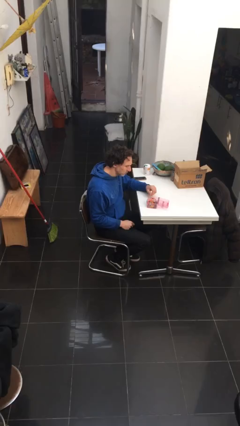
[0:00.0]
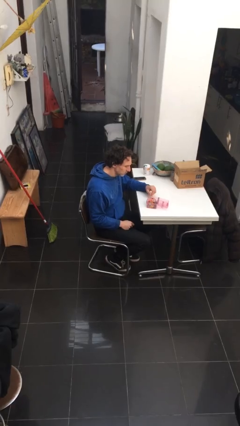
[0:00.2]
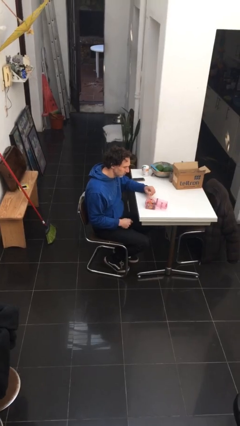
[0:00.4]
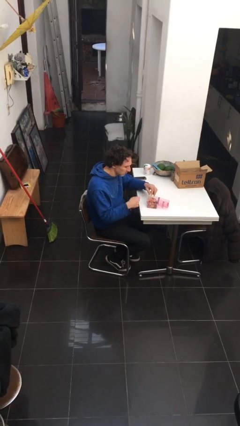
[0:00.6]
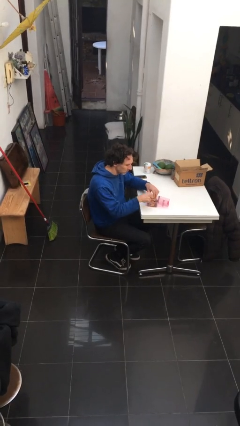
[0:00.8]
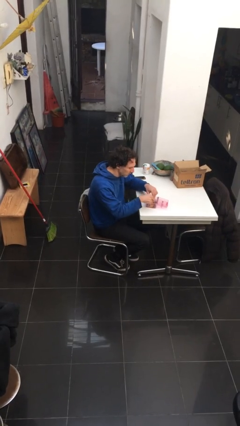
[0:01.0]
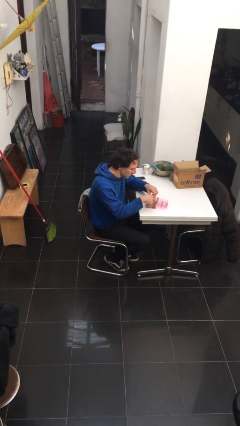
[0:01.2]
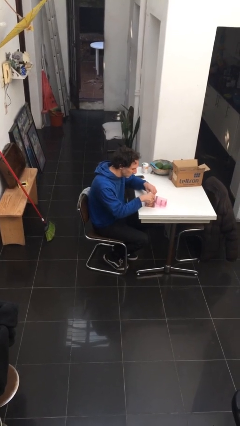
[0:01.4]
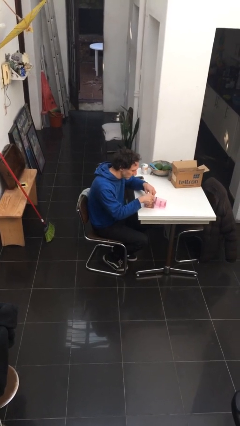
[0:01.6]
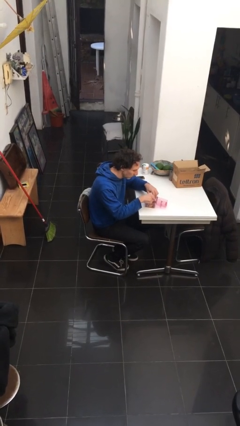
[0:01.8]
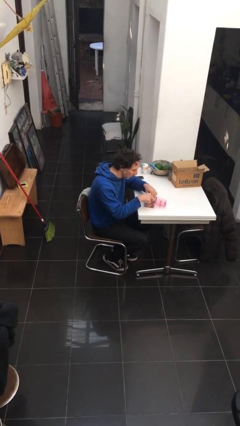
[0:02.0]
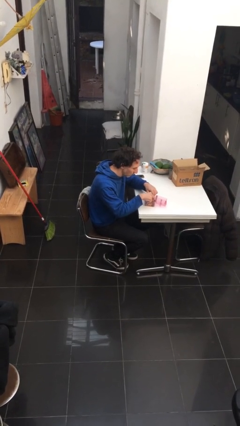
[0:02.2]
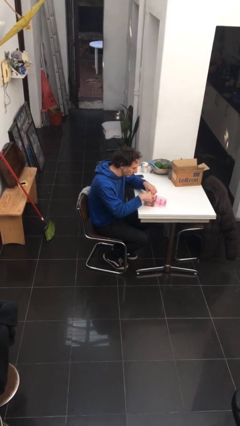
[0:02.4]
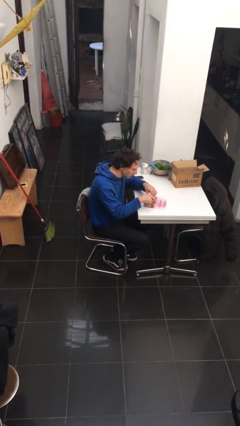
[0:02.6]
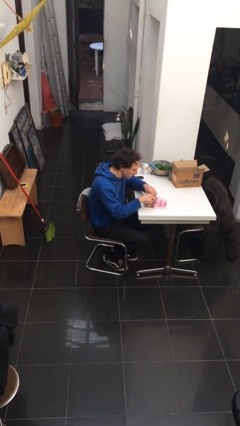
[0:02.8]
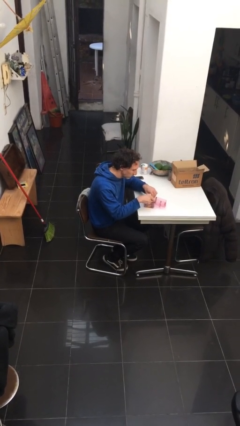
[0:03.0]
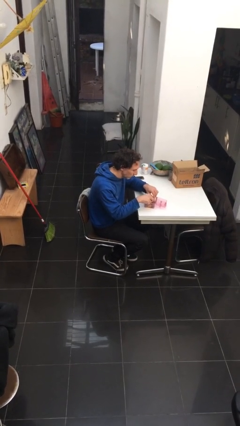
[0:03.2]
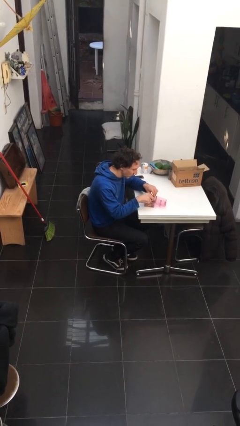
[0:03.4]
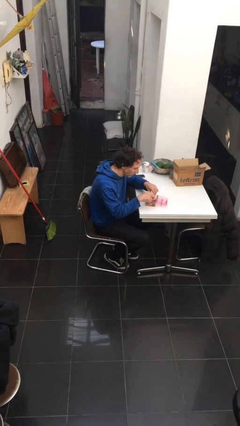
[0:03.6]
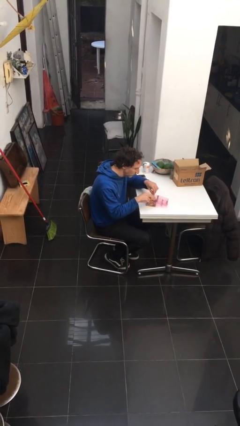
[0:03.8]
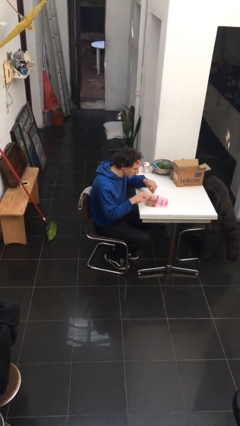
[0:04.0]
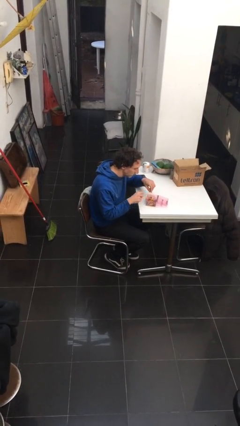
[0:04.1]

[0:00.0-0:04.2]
person searches jewelry box

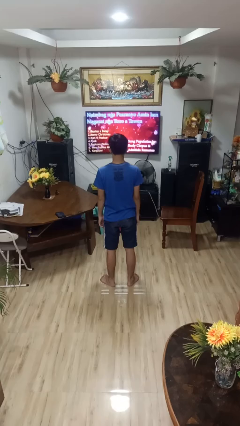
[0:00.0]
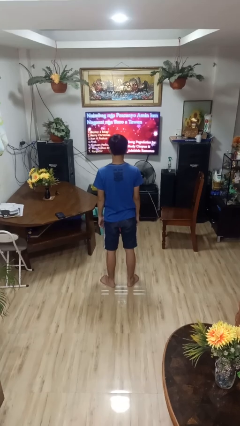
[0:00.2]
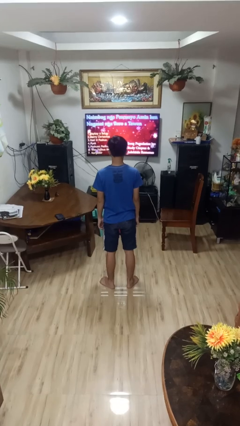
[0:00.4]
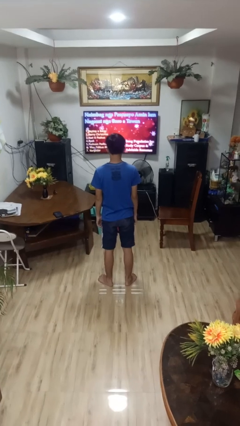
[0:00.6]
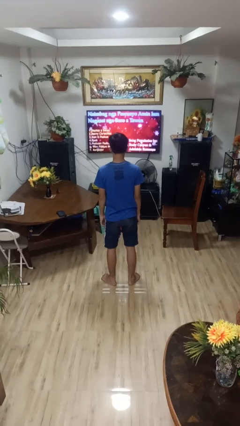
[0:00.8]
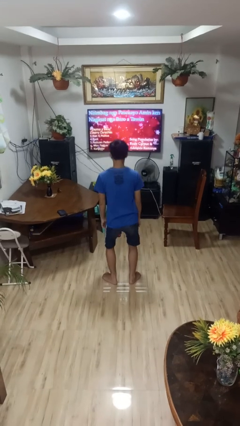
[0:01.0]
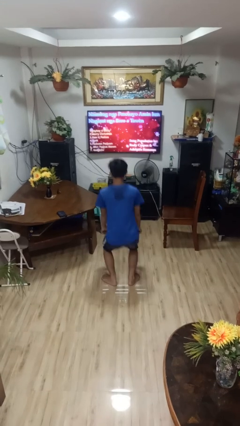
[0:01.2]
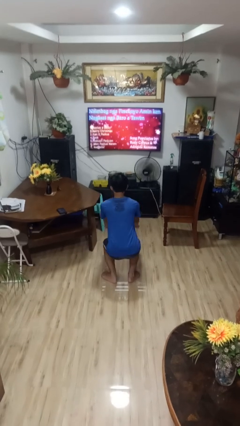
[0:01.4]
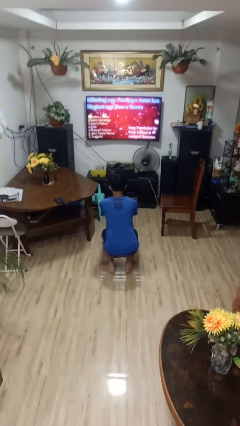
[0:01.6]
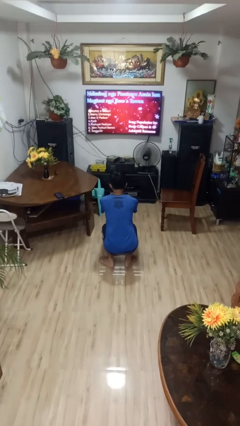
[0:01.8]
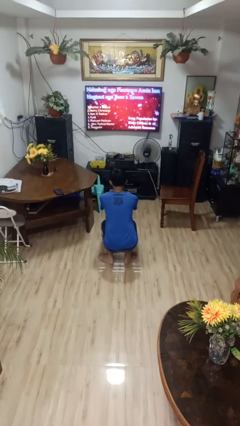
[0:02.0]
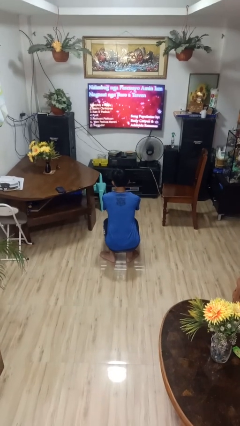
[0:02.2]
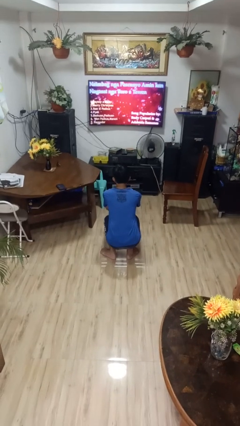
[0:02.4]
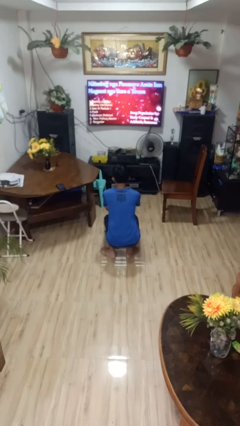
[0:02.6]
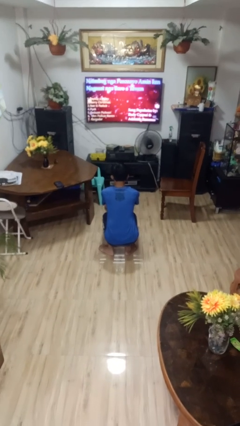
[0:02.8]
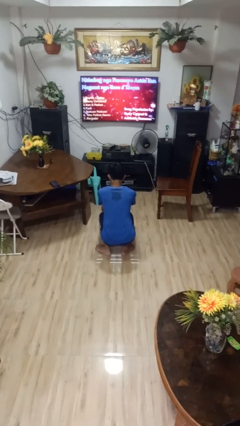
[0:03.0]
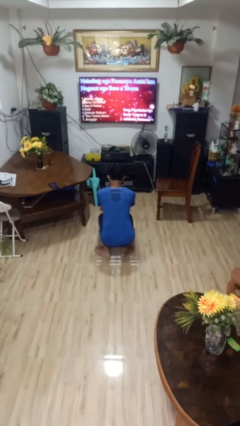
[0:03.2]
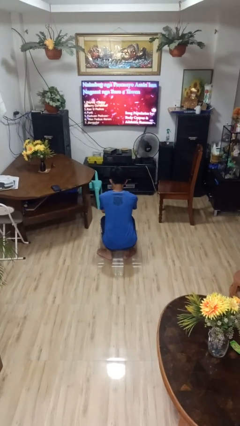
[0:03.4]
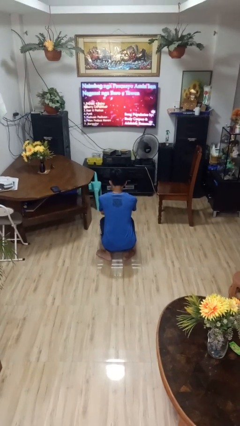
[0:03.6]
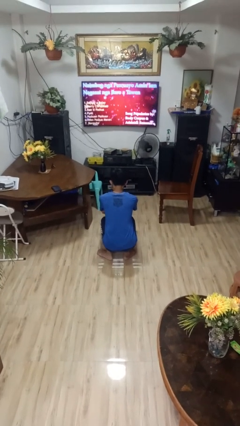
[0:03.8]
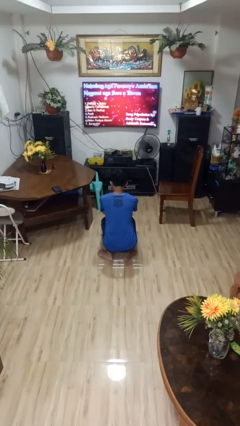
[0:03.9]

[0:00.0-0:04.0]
person squats

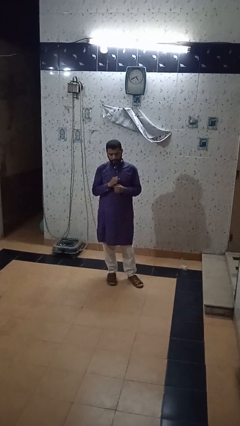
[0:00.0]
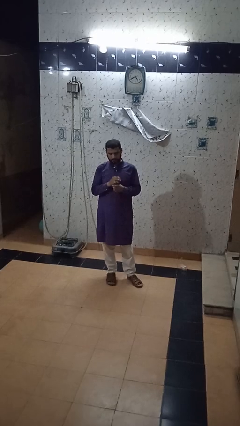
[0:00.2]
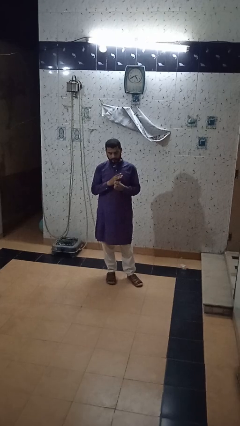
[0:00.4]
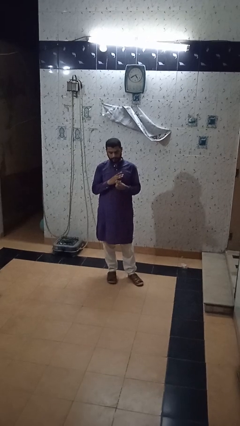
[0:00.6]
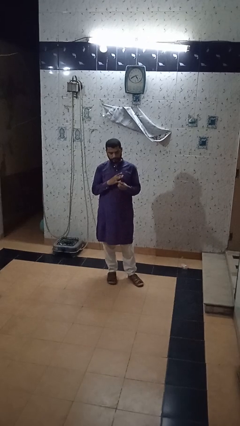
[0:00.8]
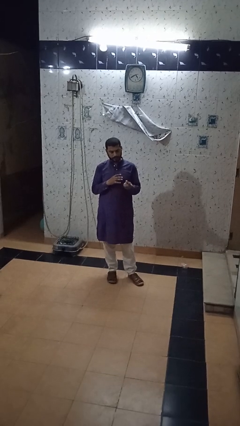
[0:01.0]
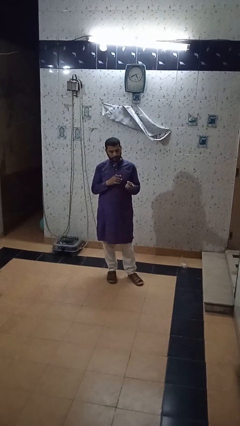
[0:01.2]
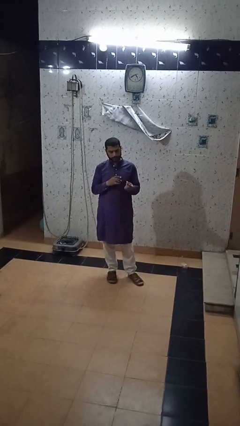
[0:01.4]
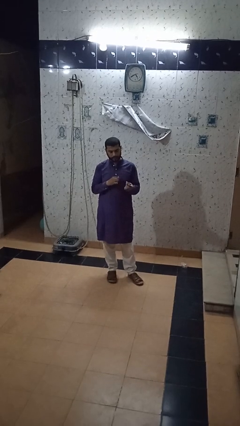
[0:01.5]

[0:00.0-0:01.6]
person takes off ring

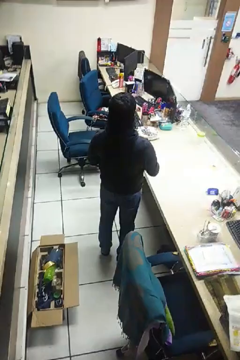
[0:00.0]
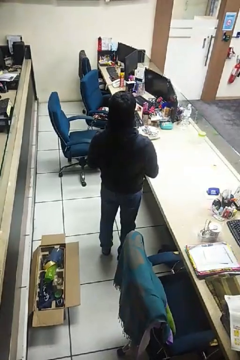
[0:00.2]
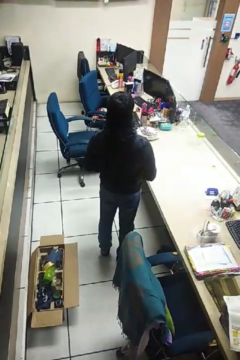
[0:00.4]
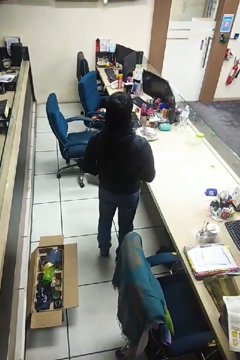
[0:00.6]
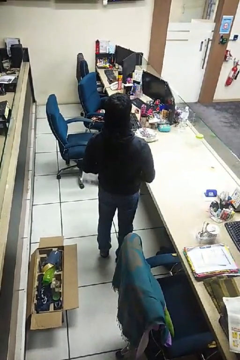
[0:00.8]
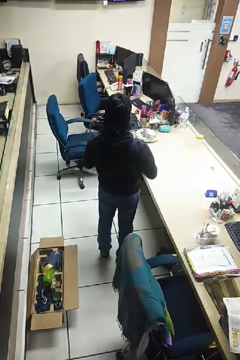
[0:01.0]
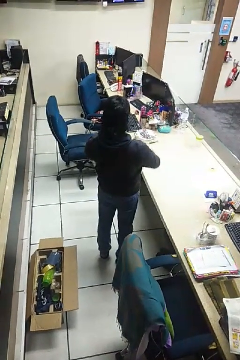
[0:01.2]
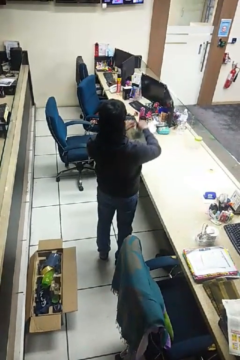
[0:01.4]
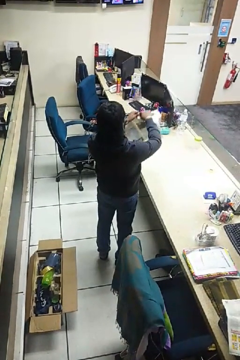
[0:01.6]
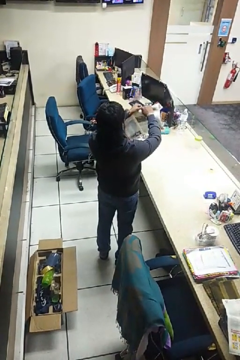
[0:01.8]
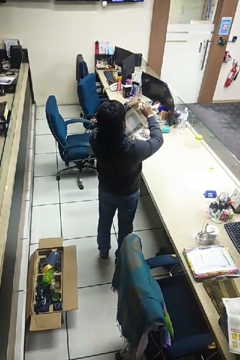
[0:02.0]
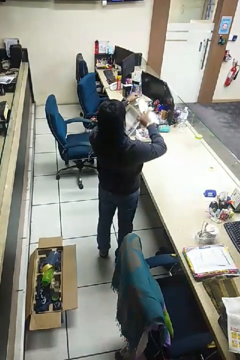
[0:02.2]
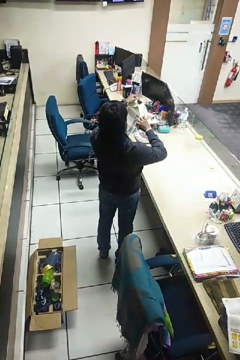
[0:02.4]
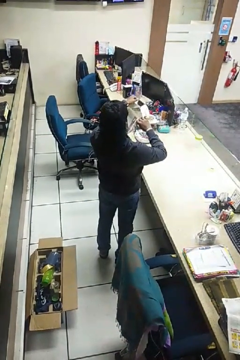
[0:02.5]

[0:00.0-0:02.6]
person tears paper

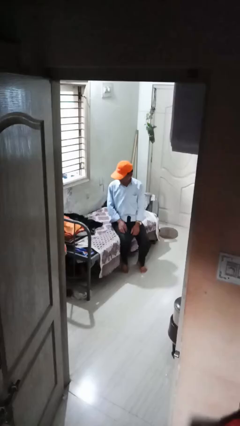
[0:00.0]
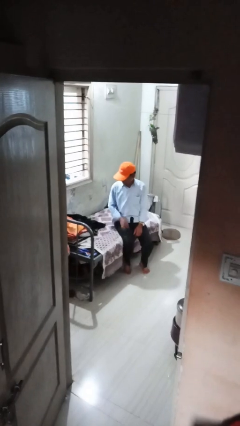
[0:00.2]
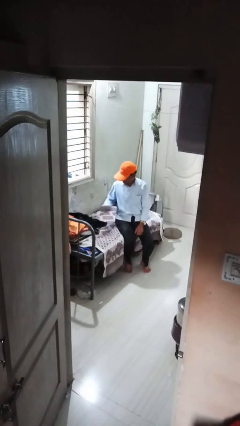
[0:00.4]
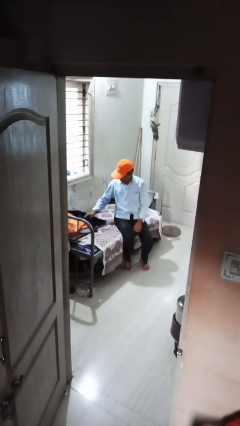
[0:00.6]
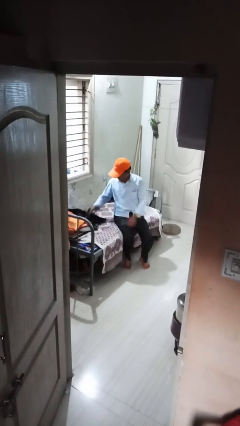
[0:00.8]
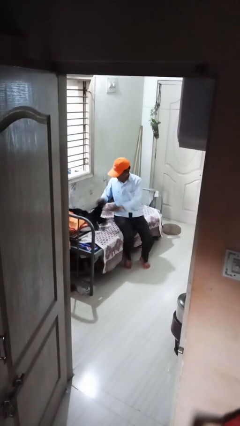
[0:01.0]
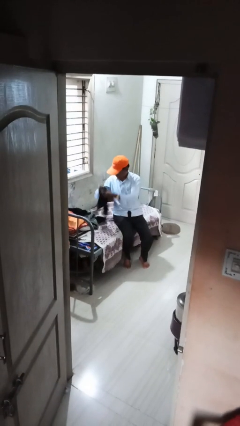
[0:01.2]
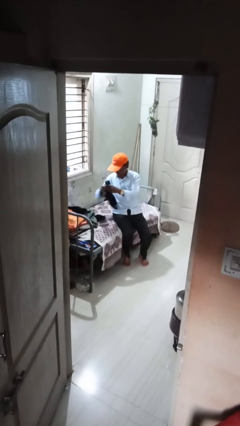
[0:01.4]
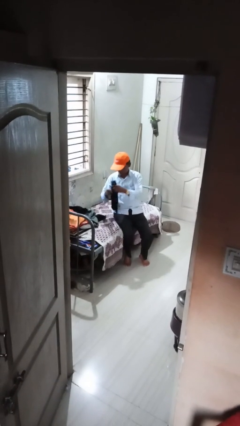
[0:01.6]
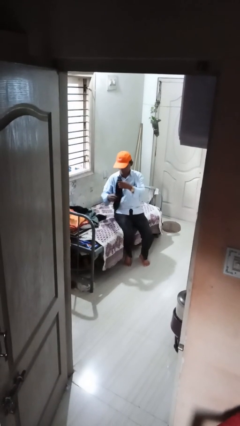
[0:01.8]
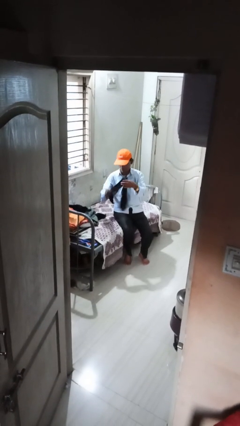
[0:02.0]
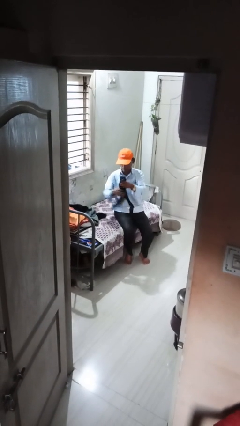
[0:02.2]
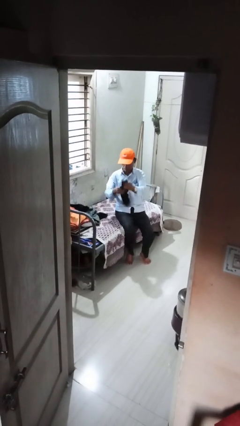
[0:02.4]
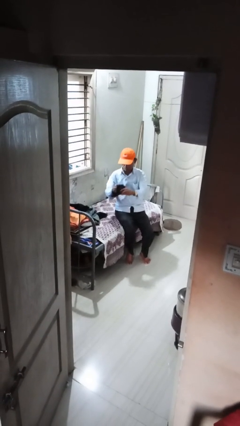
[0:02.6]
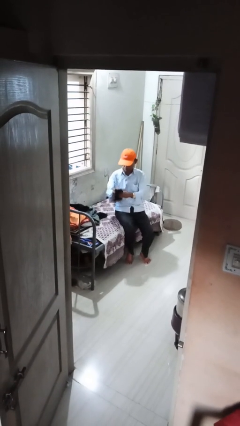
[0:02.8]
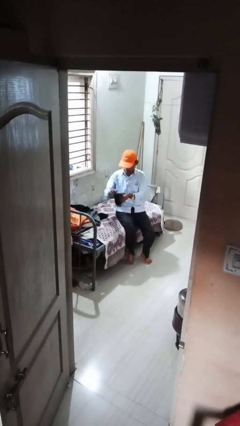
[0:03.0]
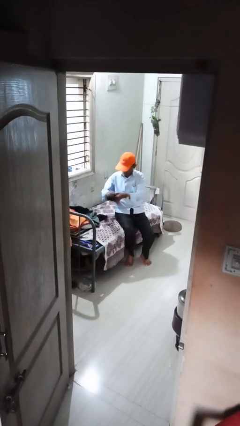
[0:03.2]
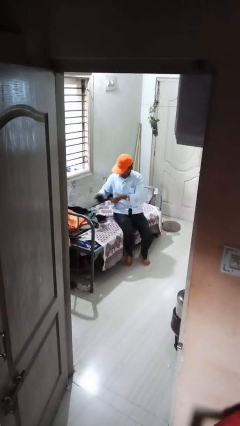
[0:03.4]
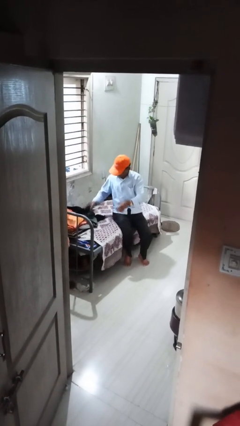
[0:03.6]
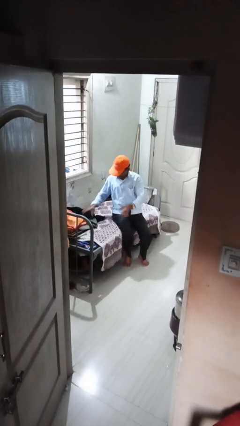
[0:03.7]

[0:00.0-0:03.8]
person folds socks

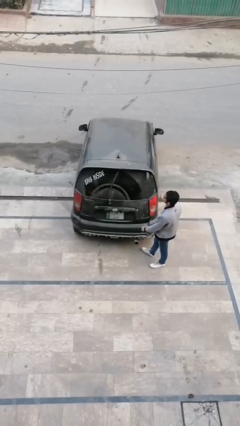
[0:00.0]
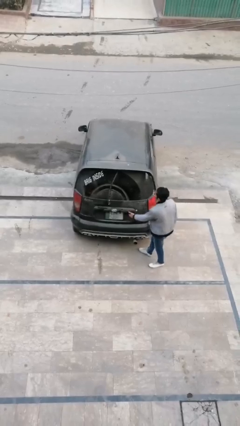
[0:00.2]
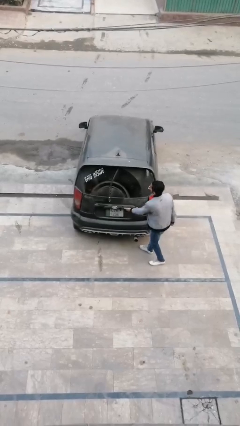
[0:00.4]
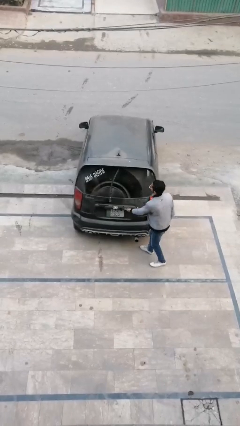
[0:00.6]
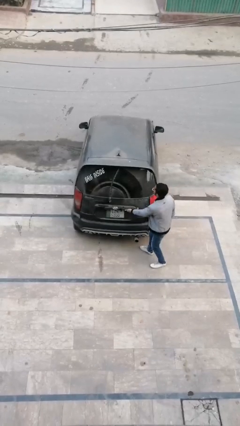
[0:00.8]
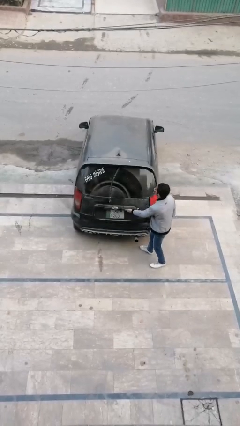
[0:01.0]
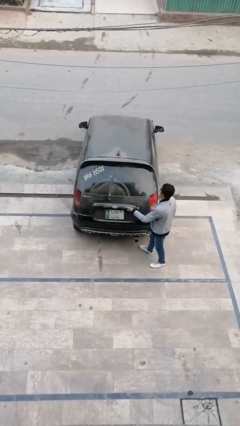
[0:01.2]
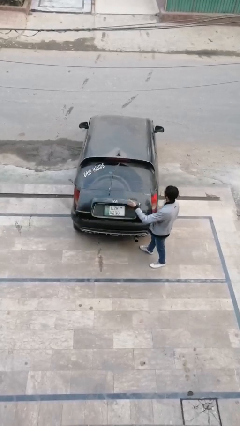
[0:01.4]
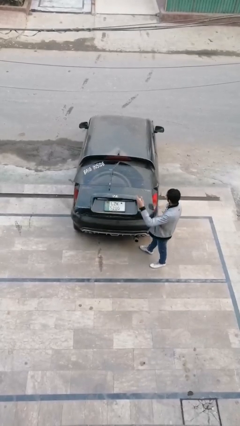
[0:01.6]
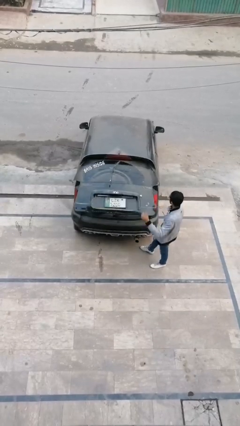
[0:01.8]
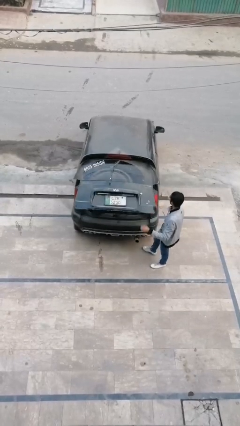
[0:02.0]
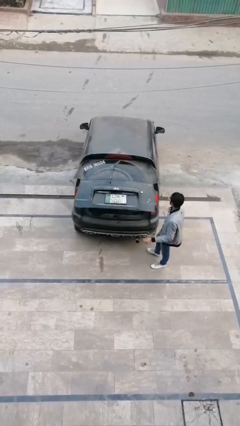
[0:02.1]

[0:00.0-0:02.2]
person closes car trunk
